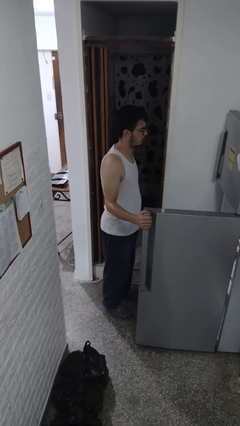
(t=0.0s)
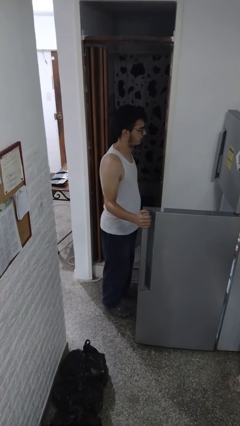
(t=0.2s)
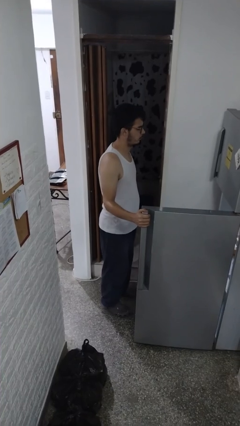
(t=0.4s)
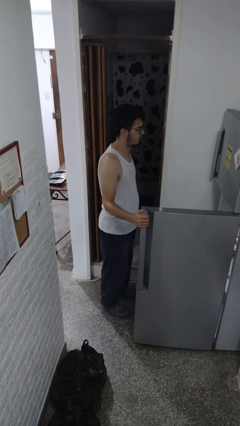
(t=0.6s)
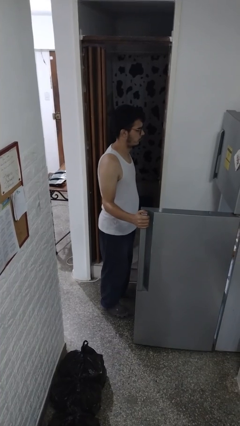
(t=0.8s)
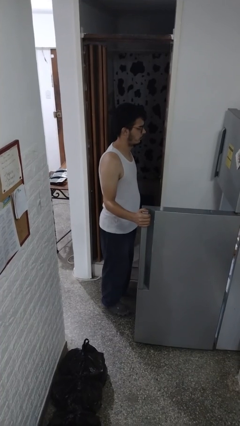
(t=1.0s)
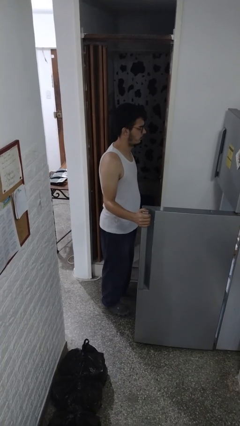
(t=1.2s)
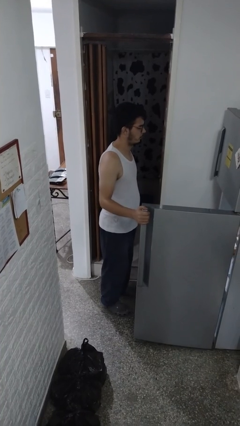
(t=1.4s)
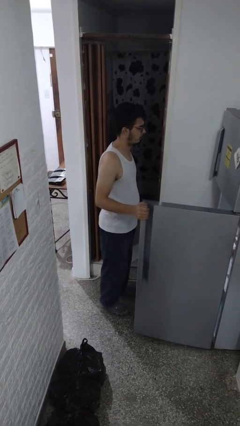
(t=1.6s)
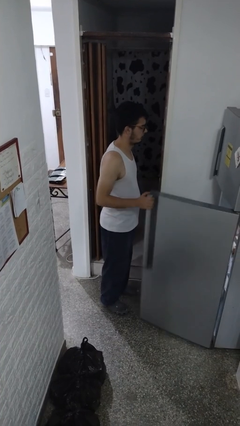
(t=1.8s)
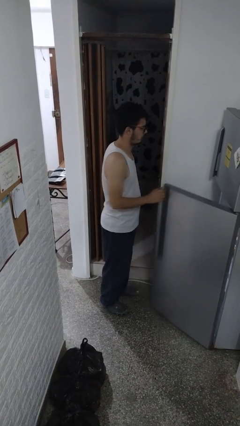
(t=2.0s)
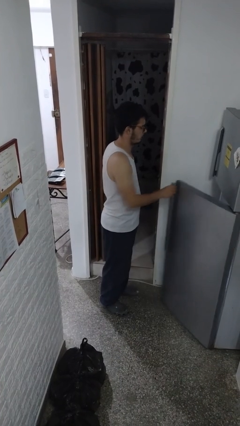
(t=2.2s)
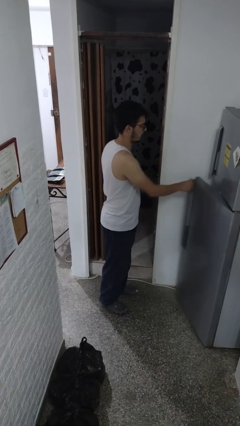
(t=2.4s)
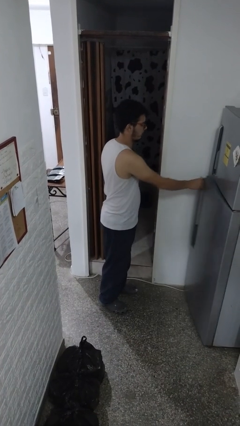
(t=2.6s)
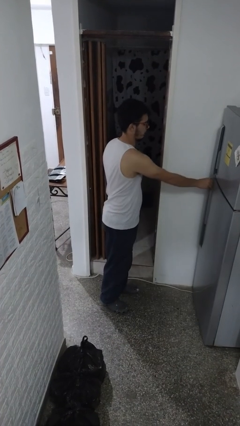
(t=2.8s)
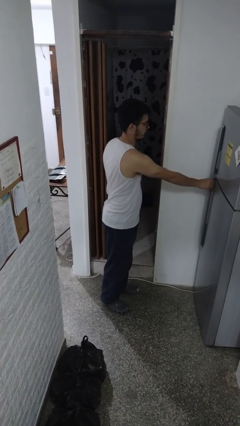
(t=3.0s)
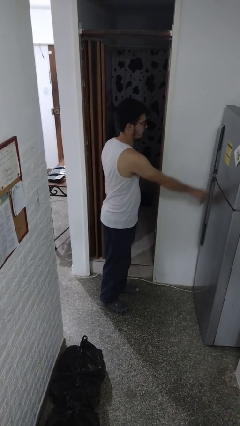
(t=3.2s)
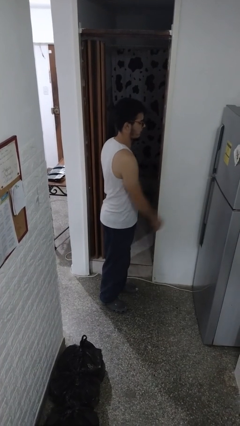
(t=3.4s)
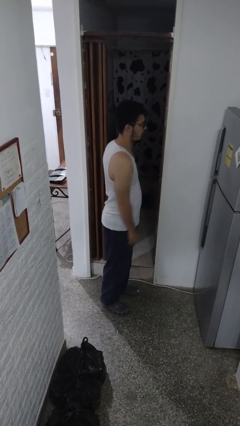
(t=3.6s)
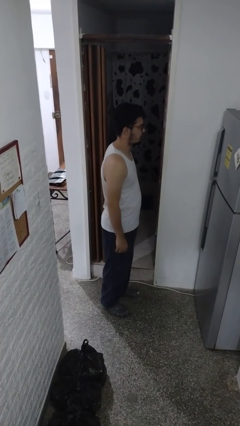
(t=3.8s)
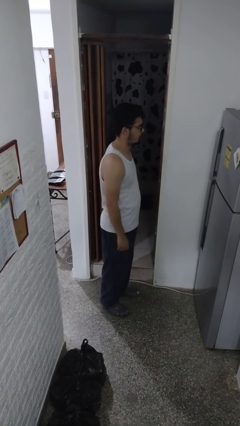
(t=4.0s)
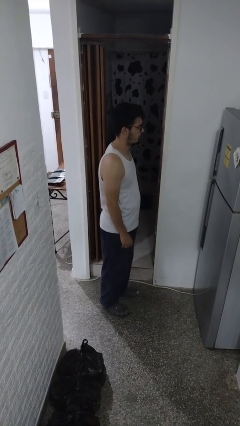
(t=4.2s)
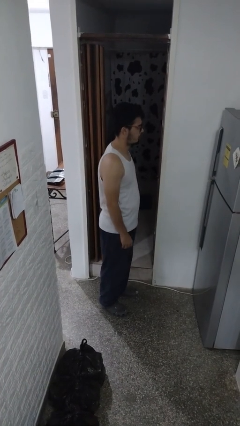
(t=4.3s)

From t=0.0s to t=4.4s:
person closes refrigerator

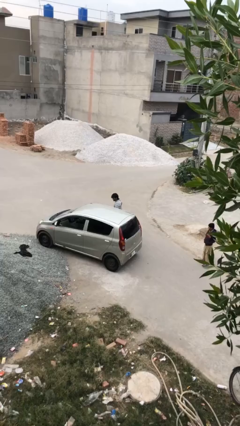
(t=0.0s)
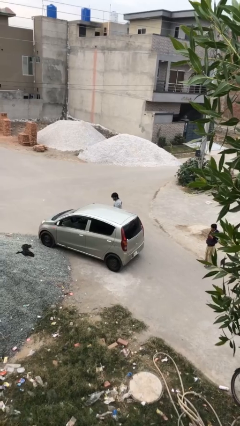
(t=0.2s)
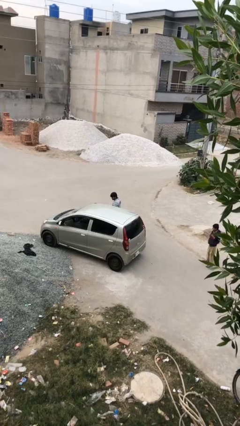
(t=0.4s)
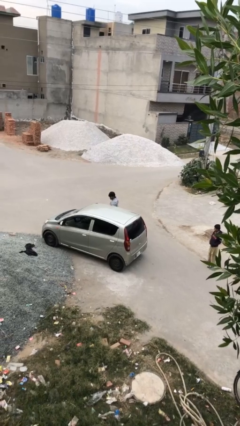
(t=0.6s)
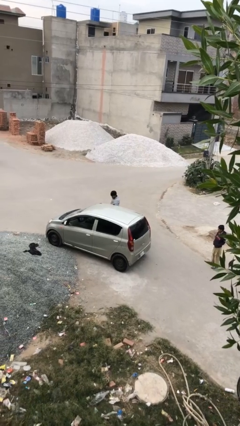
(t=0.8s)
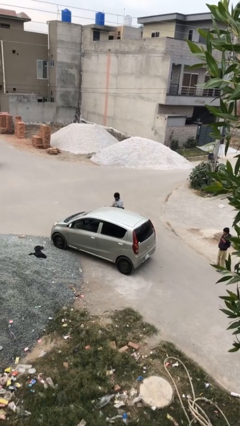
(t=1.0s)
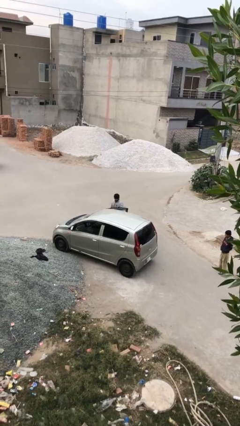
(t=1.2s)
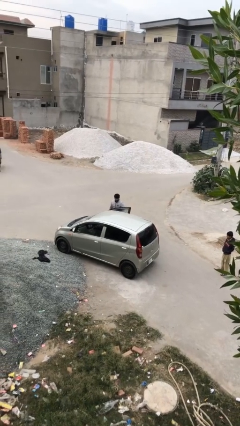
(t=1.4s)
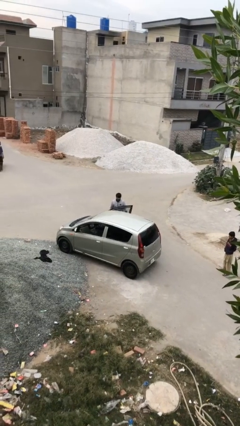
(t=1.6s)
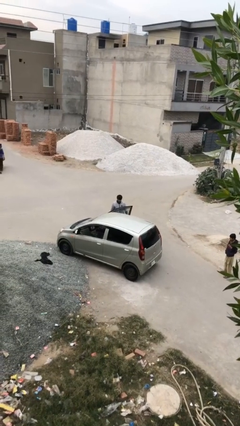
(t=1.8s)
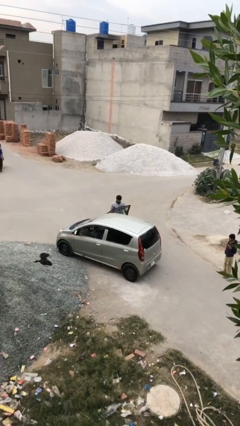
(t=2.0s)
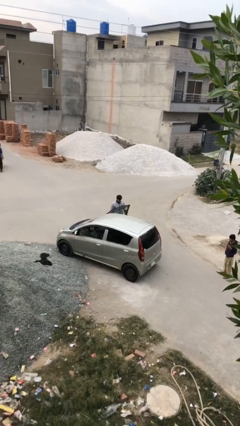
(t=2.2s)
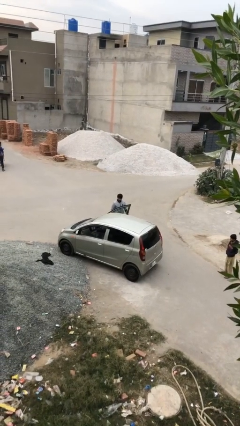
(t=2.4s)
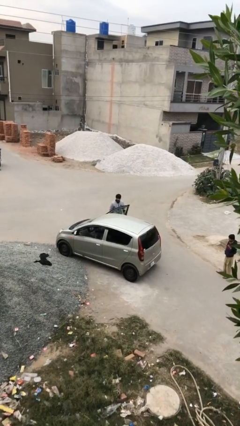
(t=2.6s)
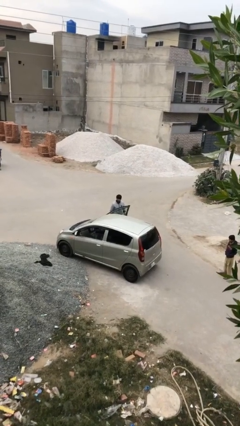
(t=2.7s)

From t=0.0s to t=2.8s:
person opens car door

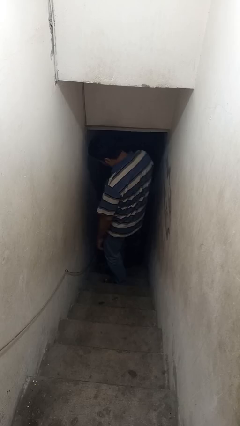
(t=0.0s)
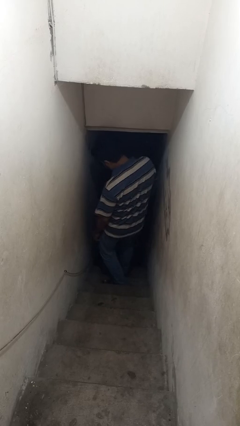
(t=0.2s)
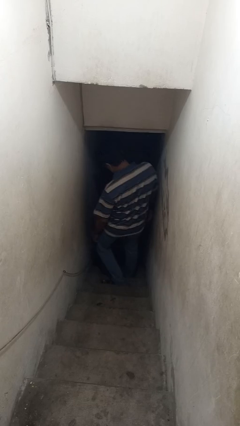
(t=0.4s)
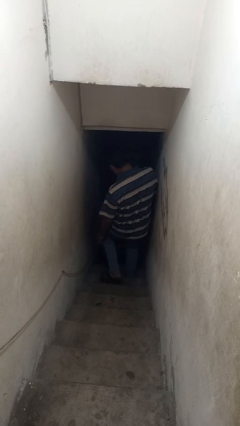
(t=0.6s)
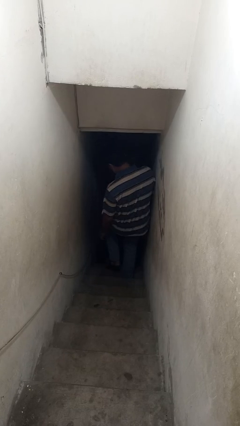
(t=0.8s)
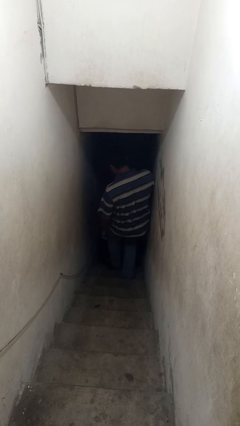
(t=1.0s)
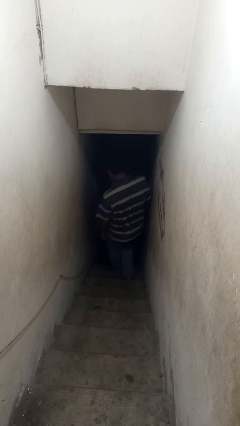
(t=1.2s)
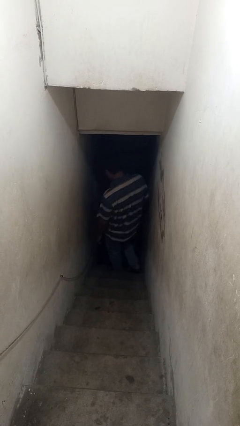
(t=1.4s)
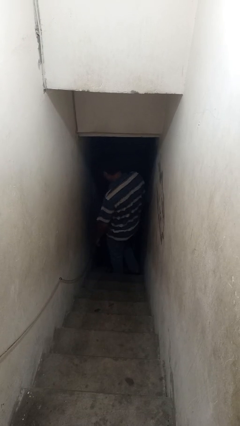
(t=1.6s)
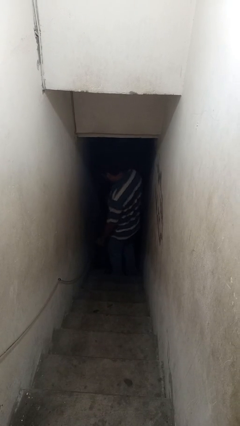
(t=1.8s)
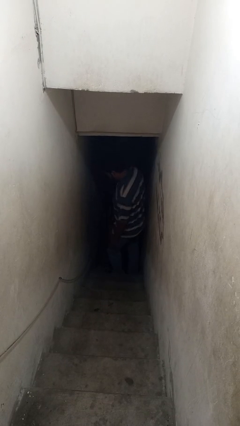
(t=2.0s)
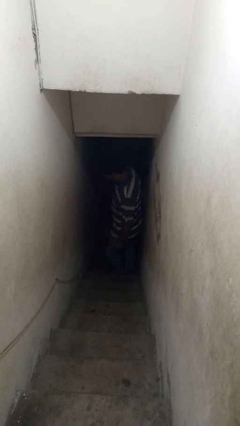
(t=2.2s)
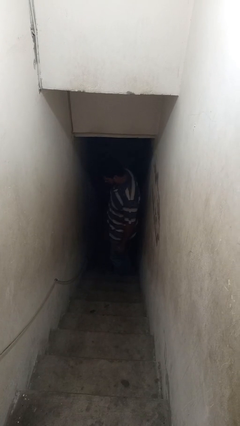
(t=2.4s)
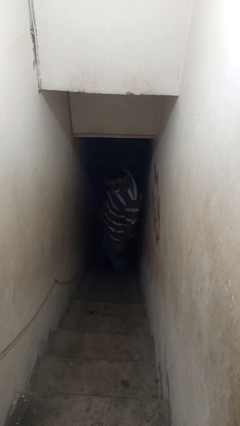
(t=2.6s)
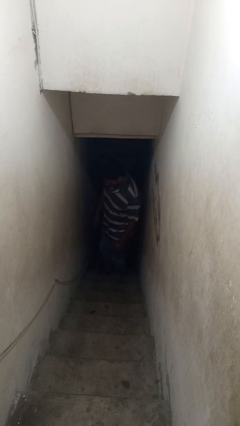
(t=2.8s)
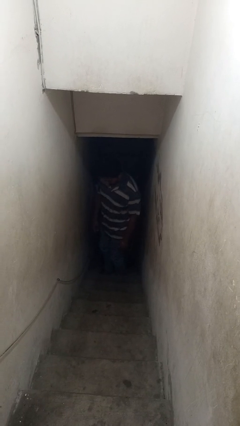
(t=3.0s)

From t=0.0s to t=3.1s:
person climbs down stairs

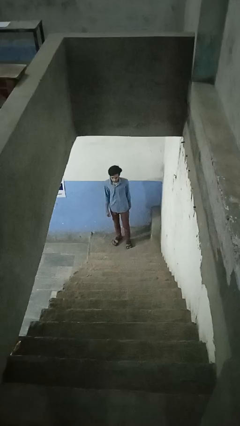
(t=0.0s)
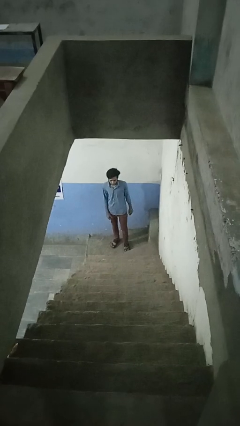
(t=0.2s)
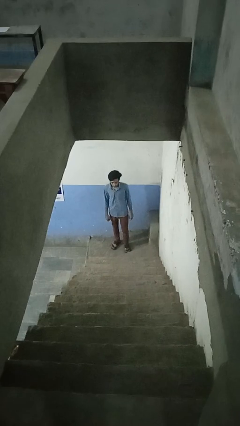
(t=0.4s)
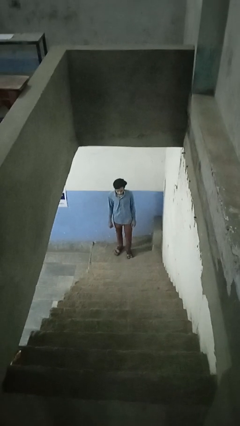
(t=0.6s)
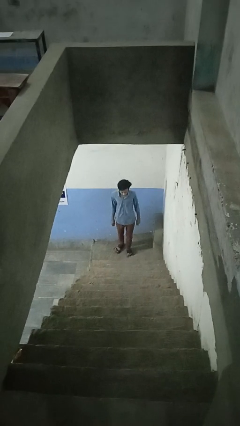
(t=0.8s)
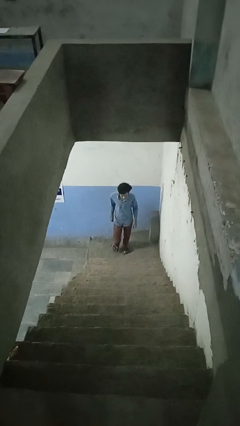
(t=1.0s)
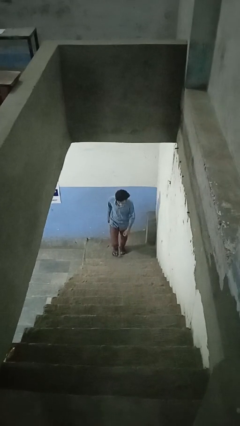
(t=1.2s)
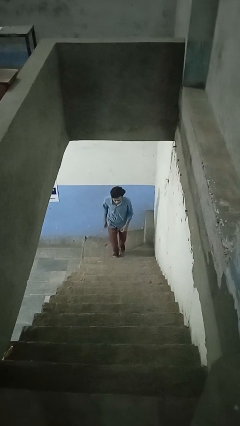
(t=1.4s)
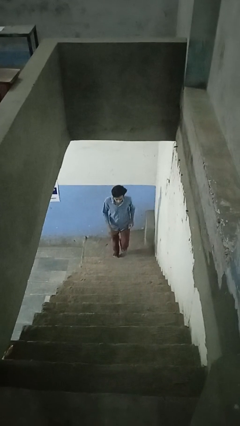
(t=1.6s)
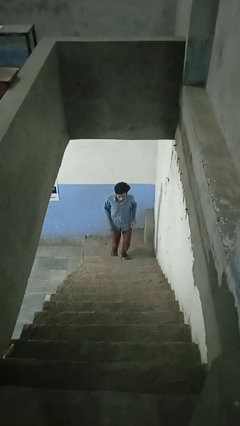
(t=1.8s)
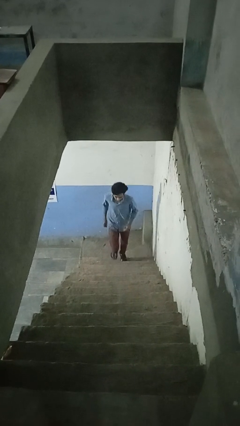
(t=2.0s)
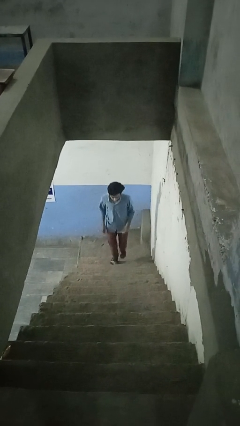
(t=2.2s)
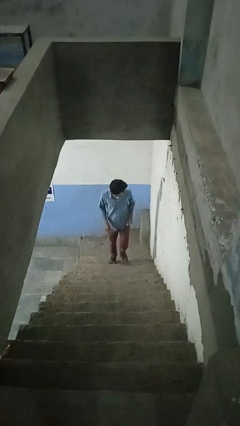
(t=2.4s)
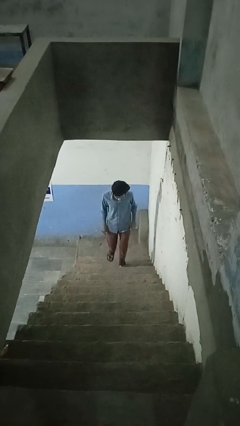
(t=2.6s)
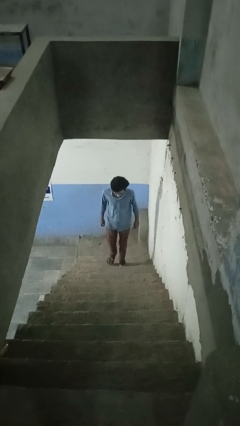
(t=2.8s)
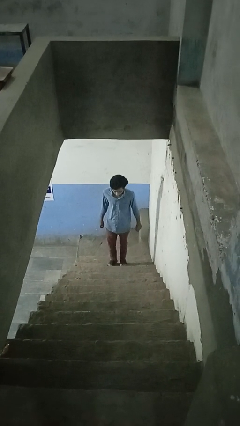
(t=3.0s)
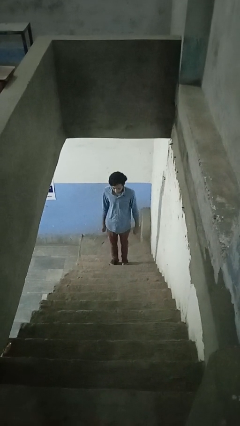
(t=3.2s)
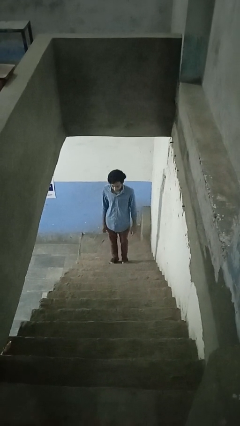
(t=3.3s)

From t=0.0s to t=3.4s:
person climbs up stairs

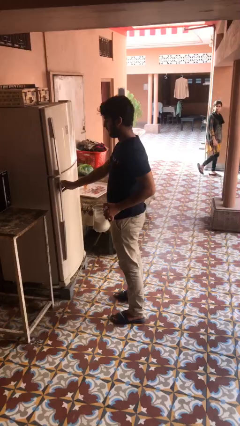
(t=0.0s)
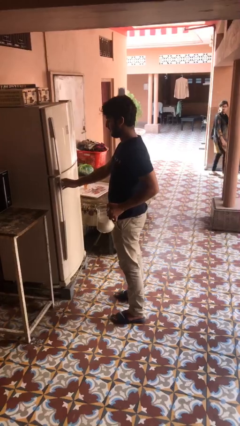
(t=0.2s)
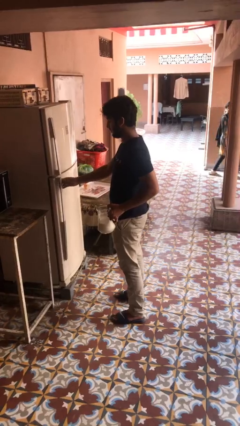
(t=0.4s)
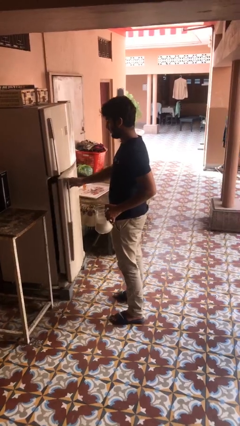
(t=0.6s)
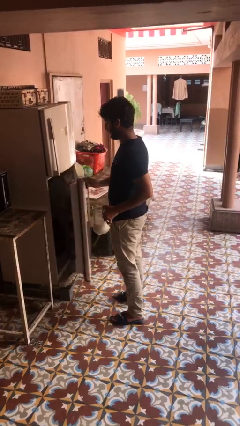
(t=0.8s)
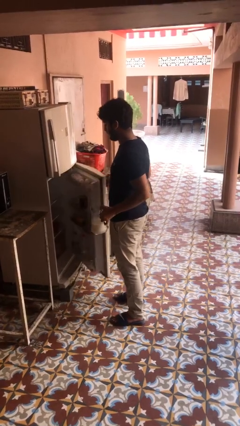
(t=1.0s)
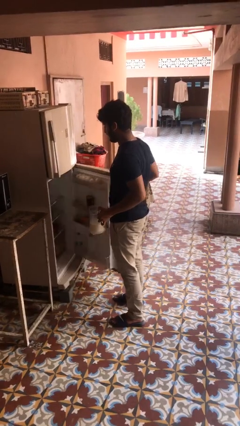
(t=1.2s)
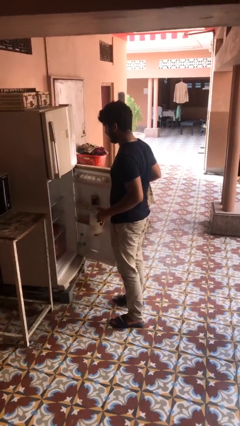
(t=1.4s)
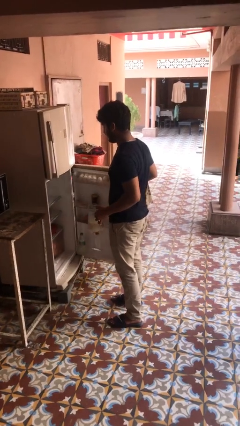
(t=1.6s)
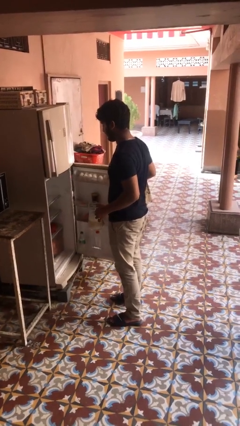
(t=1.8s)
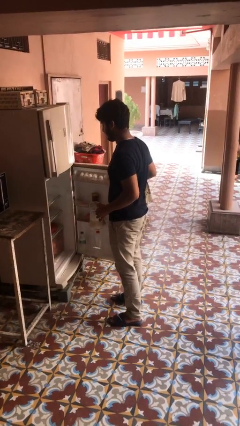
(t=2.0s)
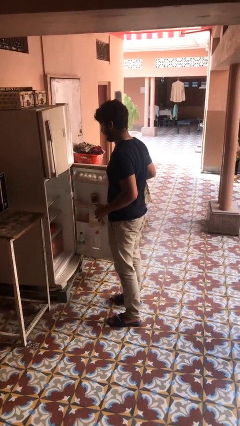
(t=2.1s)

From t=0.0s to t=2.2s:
person opens refrigerator

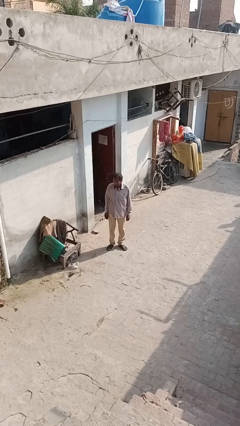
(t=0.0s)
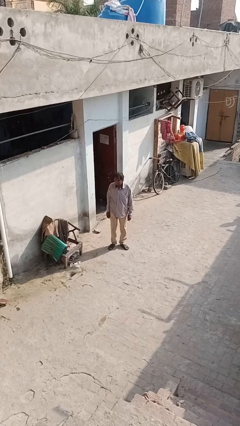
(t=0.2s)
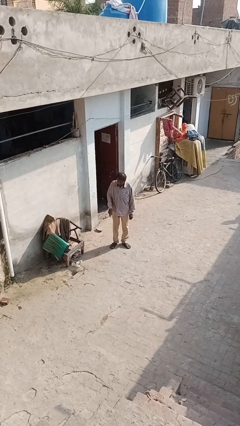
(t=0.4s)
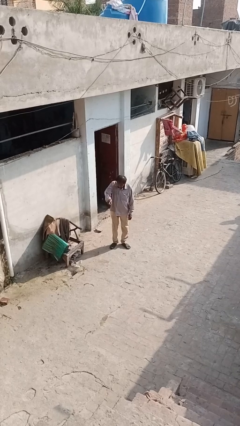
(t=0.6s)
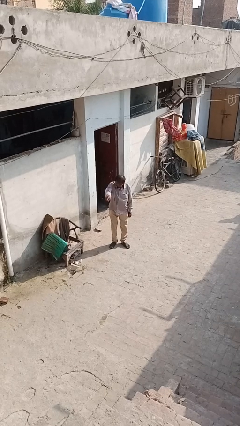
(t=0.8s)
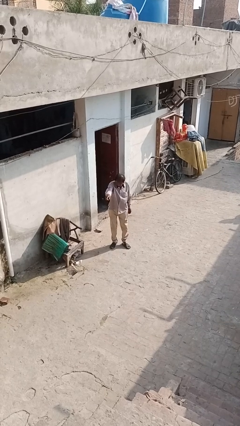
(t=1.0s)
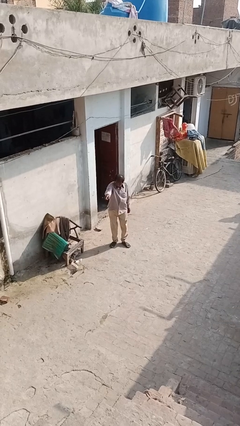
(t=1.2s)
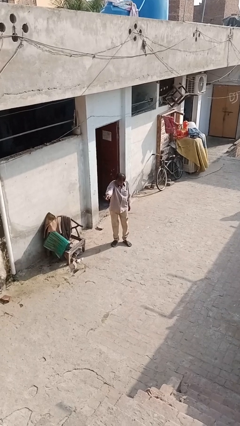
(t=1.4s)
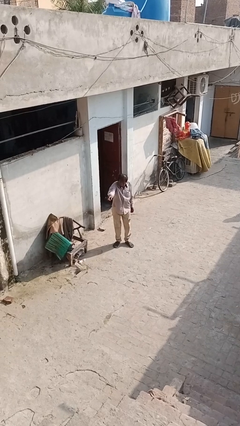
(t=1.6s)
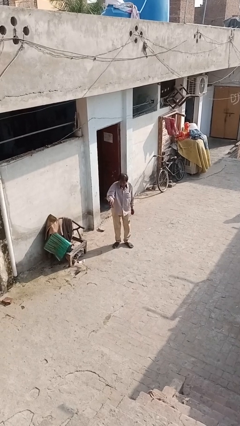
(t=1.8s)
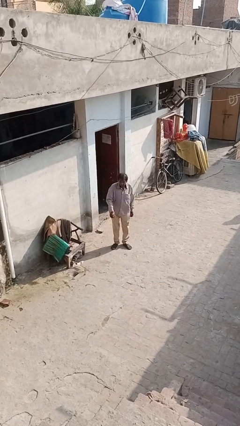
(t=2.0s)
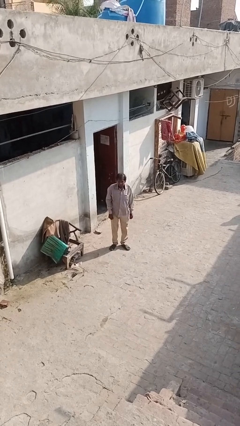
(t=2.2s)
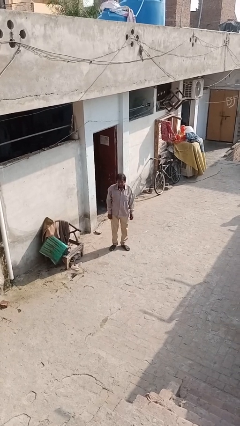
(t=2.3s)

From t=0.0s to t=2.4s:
person points at person
